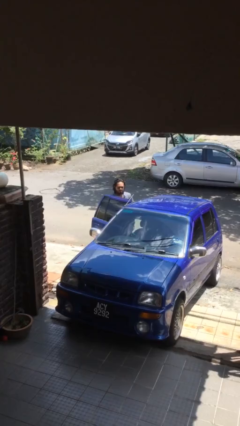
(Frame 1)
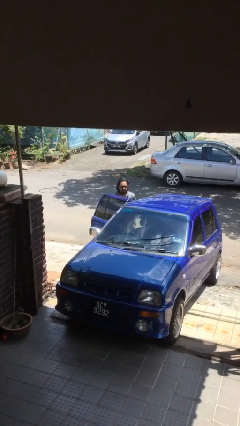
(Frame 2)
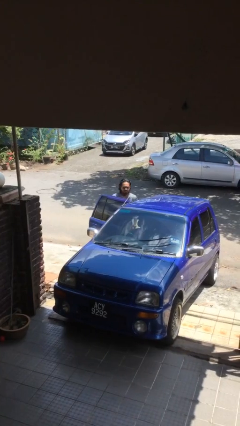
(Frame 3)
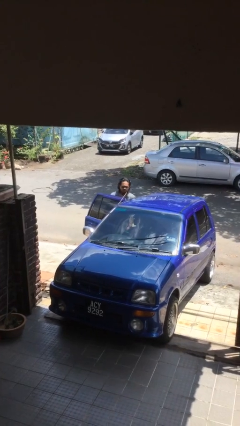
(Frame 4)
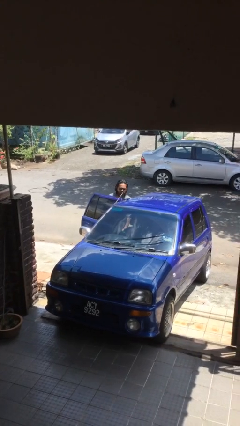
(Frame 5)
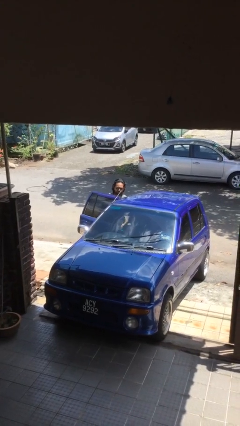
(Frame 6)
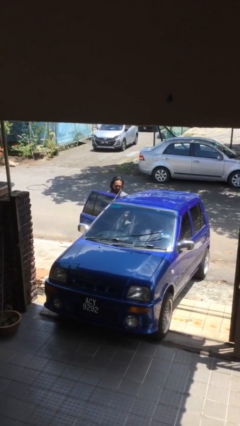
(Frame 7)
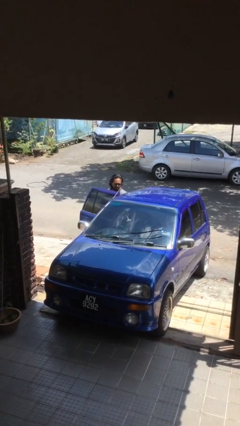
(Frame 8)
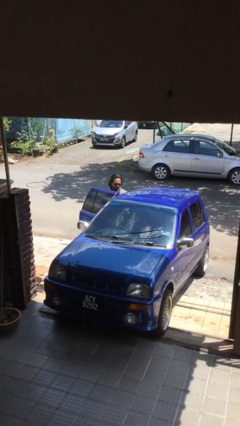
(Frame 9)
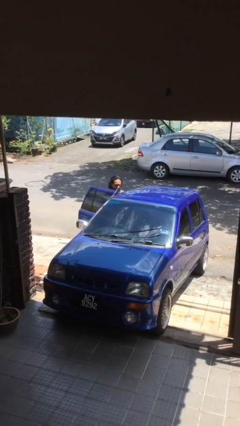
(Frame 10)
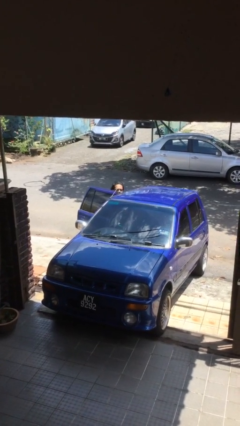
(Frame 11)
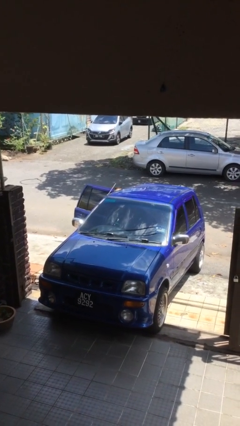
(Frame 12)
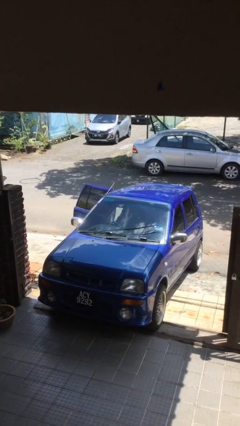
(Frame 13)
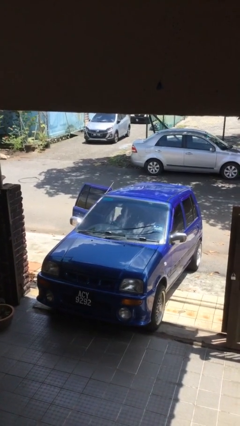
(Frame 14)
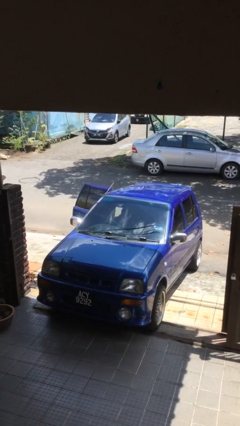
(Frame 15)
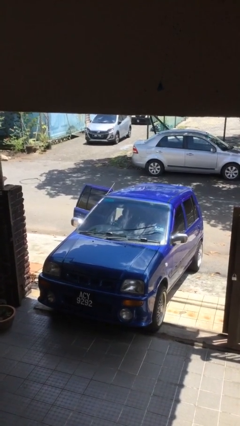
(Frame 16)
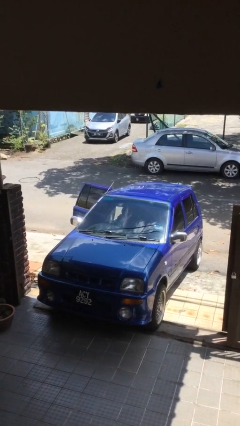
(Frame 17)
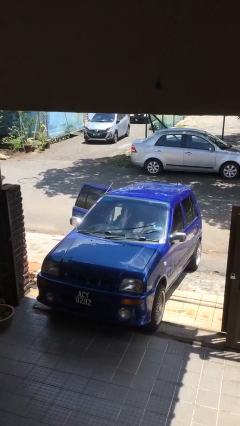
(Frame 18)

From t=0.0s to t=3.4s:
person enters car

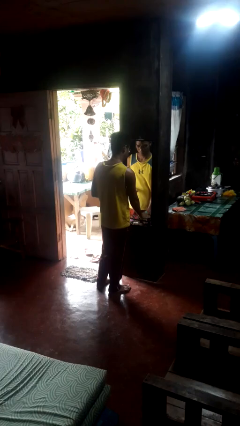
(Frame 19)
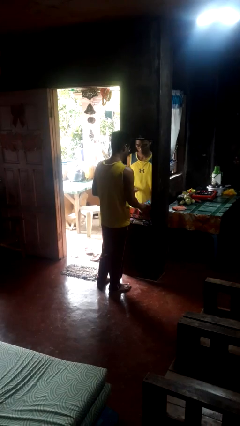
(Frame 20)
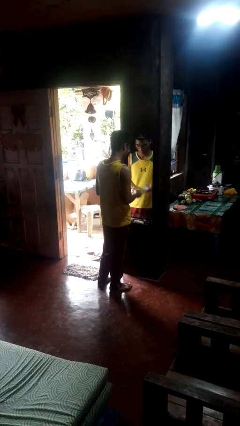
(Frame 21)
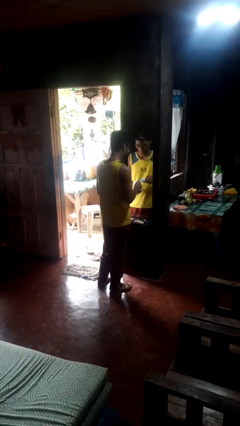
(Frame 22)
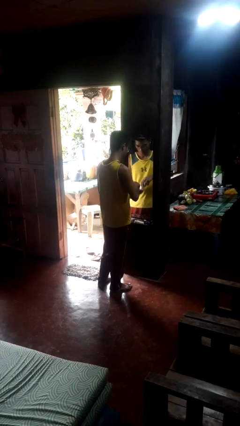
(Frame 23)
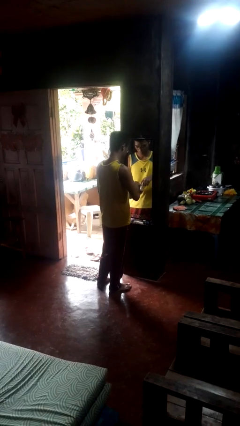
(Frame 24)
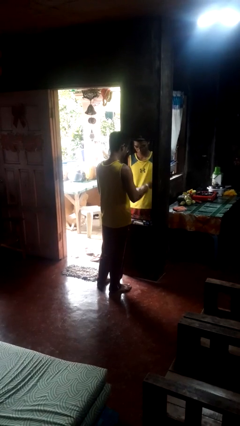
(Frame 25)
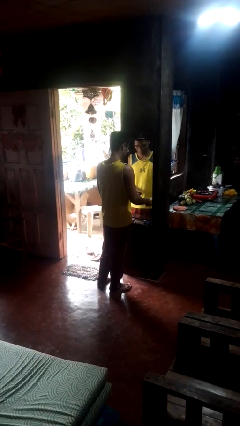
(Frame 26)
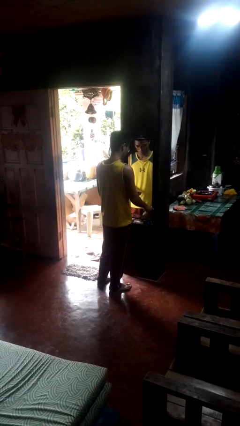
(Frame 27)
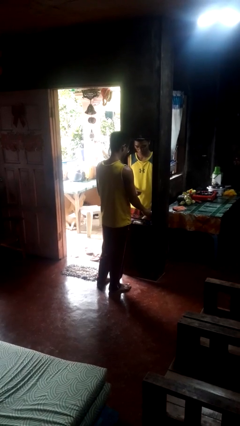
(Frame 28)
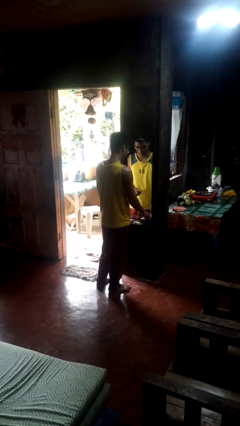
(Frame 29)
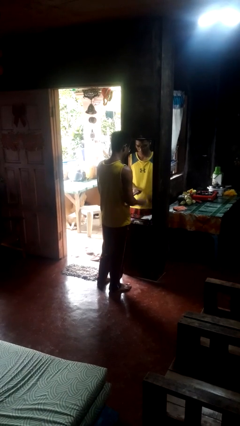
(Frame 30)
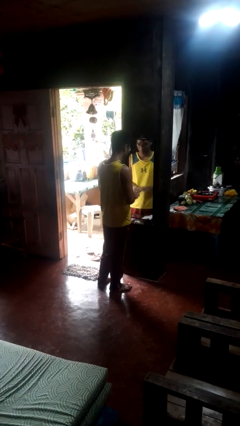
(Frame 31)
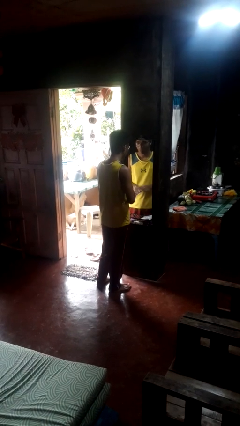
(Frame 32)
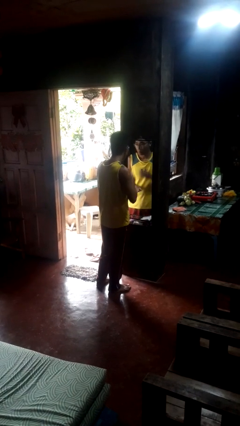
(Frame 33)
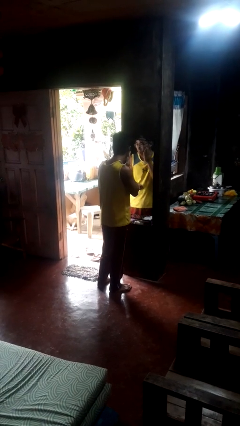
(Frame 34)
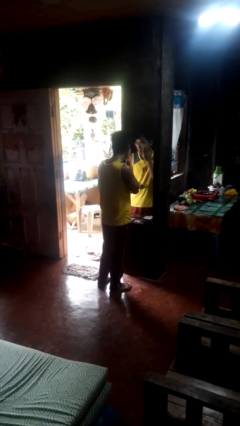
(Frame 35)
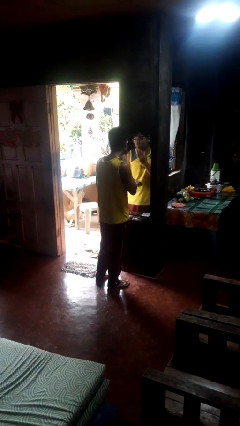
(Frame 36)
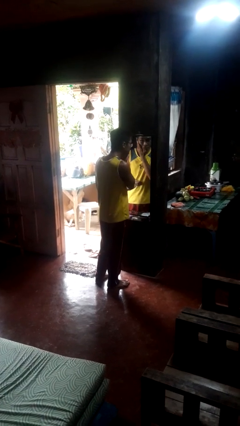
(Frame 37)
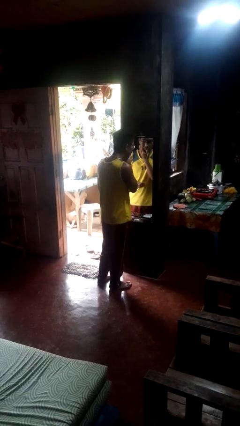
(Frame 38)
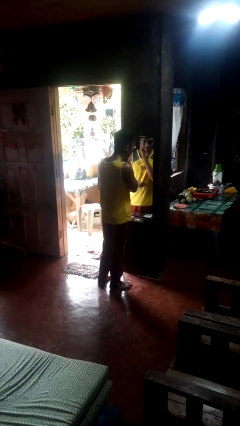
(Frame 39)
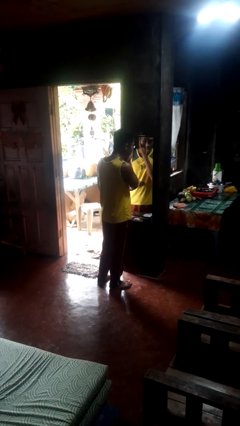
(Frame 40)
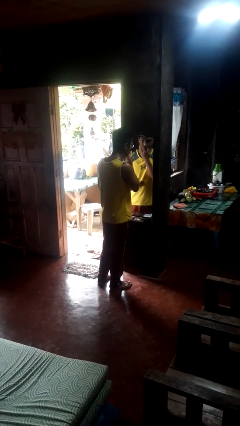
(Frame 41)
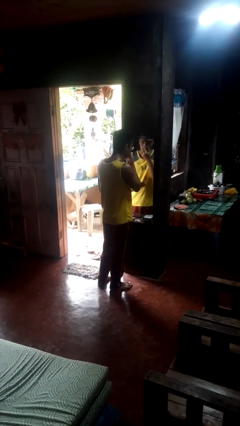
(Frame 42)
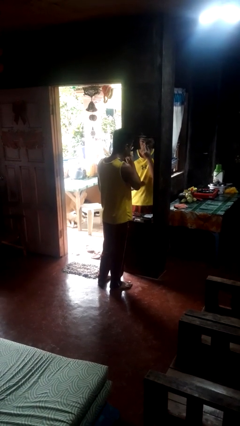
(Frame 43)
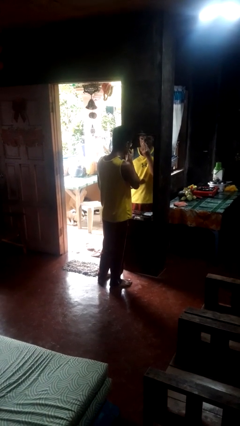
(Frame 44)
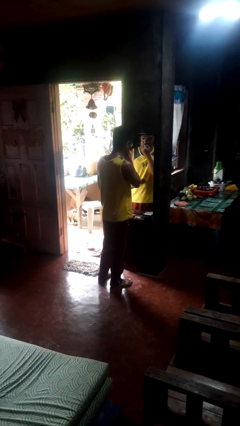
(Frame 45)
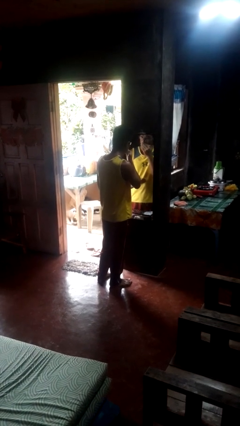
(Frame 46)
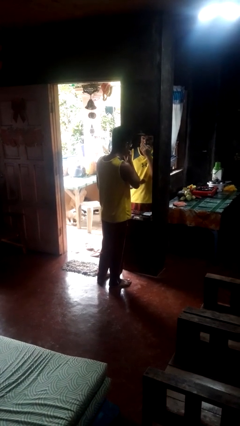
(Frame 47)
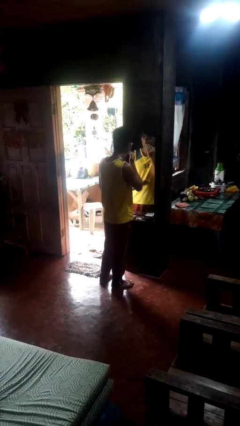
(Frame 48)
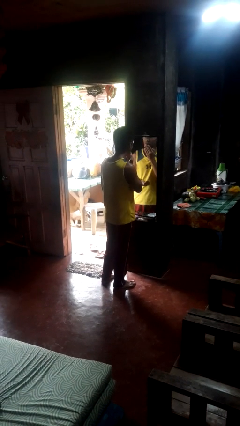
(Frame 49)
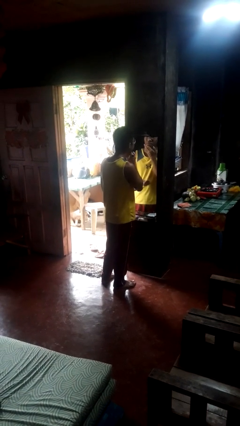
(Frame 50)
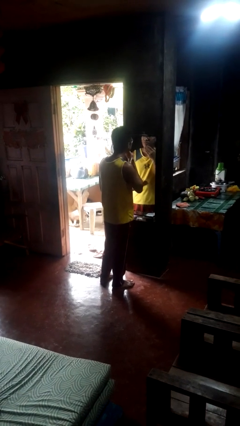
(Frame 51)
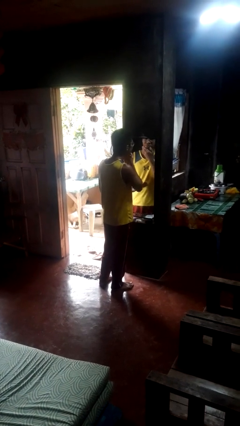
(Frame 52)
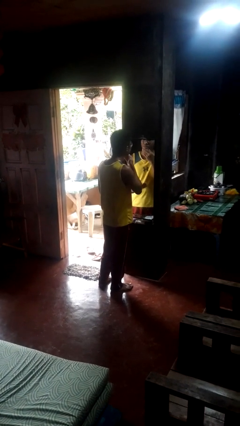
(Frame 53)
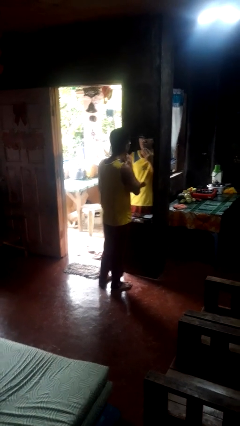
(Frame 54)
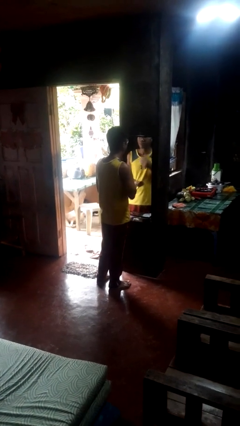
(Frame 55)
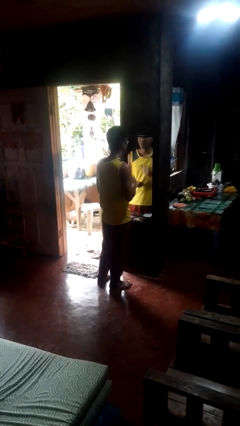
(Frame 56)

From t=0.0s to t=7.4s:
person applies foundation makeup

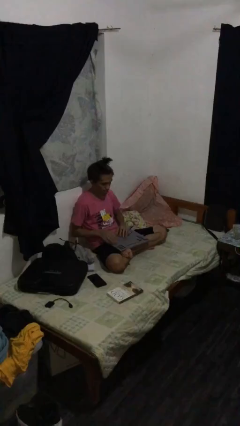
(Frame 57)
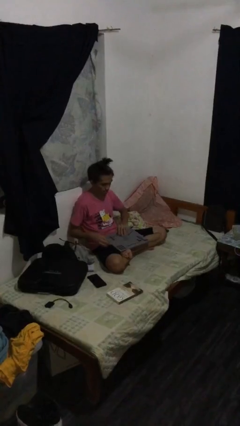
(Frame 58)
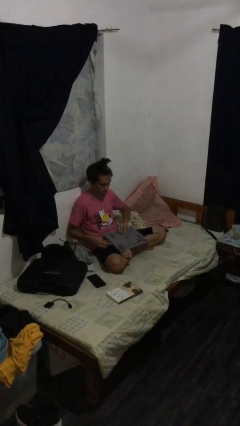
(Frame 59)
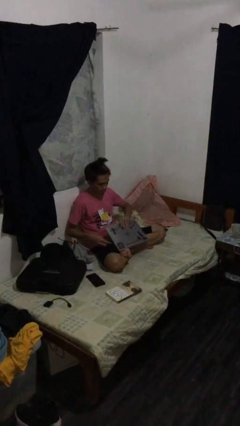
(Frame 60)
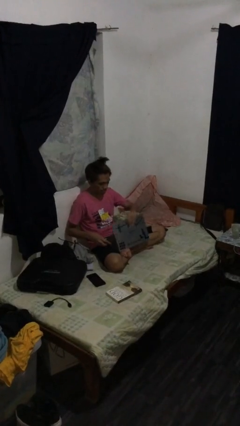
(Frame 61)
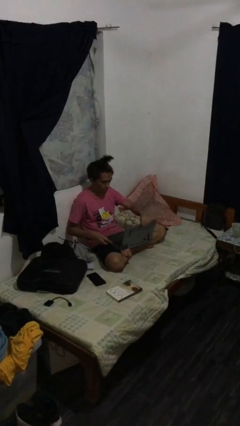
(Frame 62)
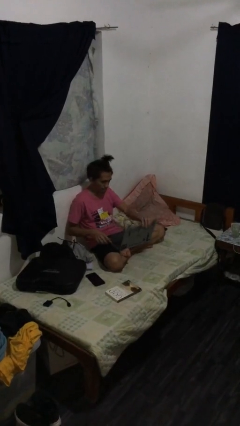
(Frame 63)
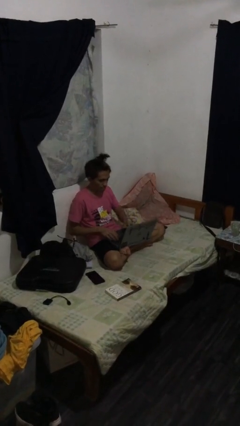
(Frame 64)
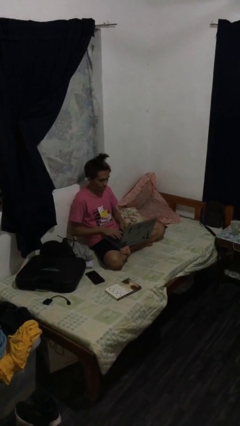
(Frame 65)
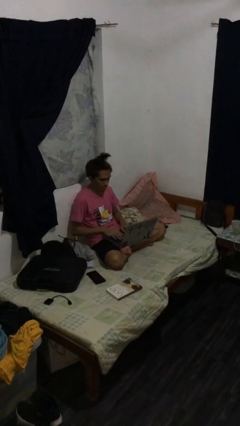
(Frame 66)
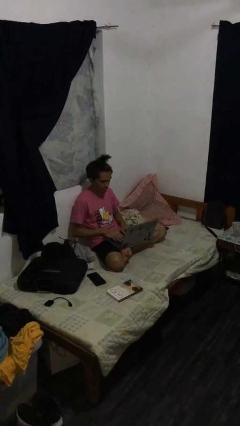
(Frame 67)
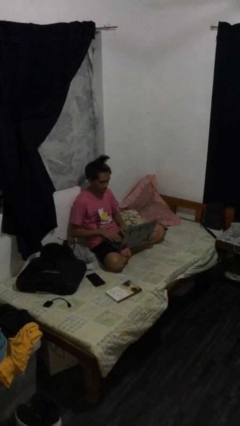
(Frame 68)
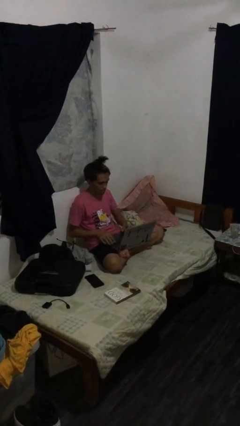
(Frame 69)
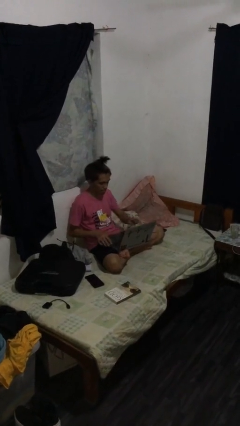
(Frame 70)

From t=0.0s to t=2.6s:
person interacts with laptop

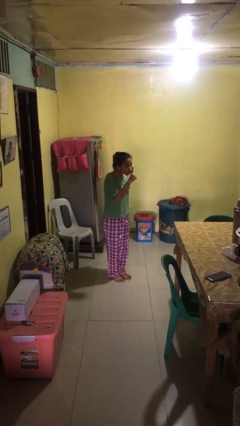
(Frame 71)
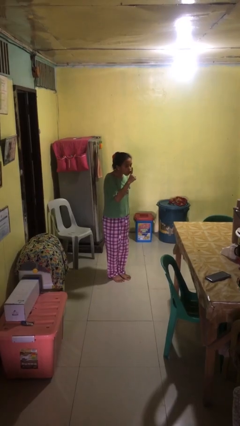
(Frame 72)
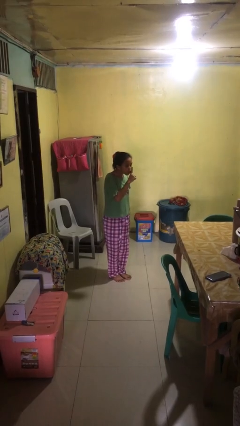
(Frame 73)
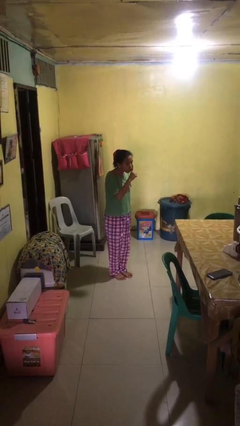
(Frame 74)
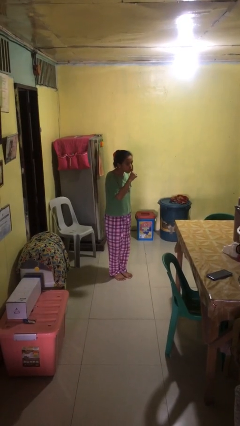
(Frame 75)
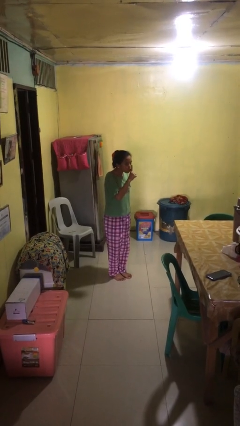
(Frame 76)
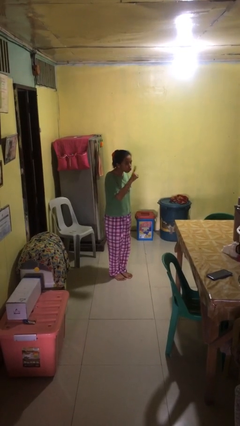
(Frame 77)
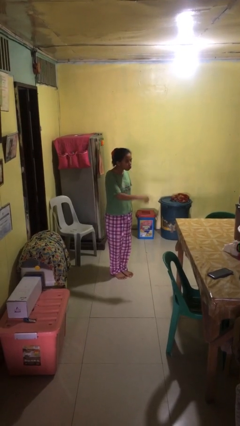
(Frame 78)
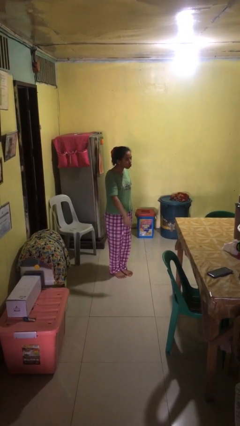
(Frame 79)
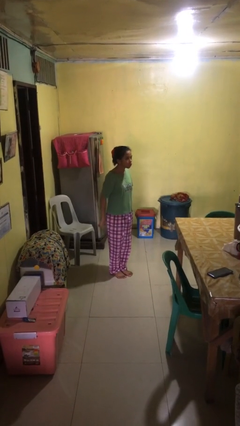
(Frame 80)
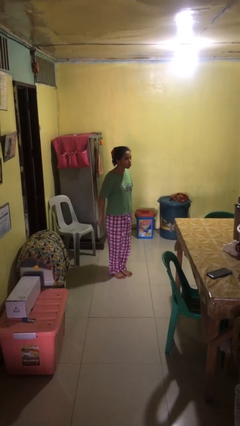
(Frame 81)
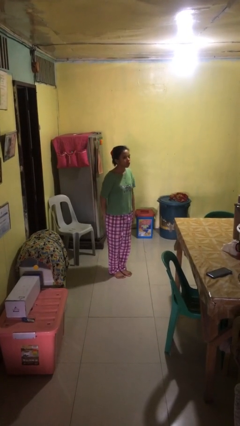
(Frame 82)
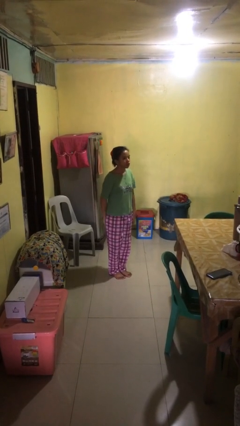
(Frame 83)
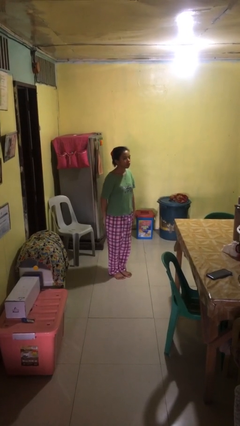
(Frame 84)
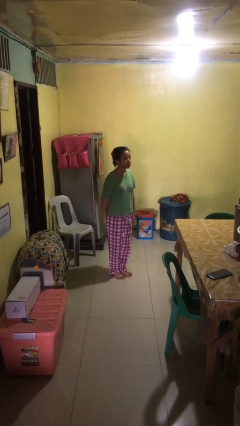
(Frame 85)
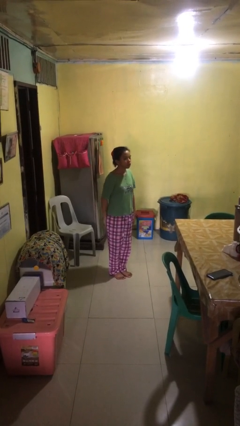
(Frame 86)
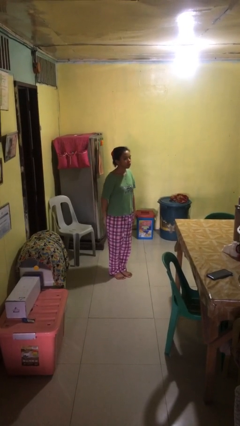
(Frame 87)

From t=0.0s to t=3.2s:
person gestures be quiet

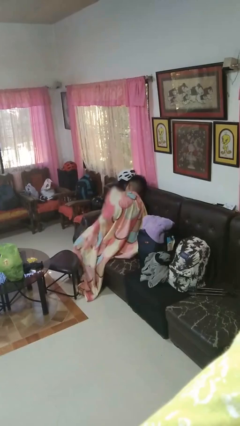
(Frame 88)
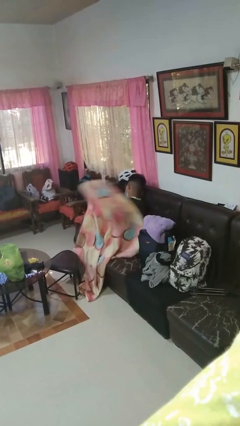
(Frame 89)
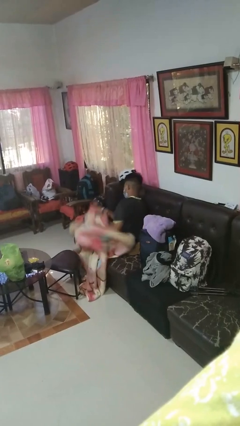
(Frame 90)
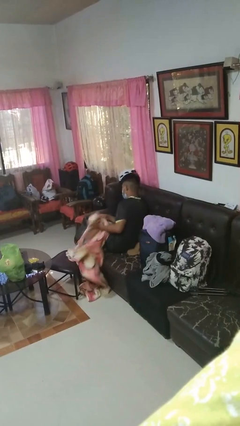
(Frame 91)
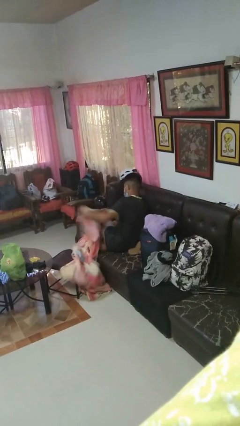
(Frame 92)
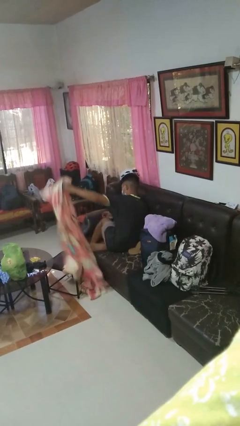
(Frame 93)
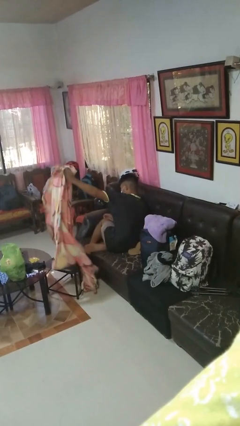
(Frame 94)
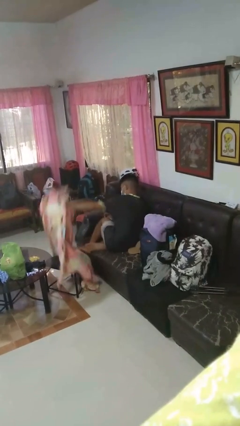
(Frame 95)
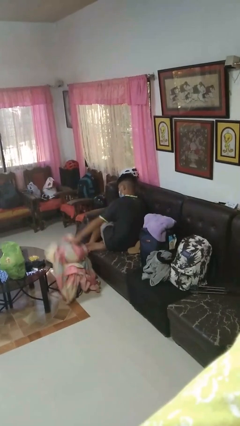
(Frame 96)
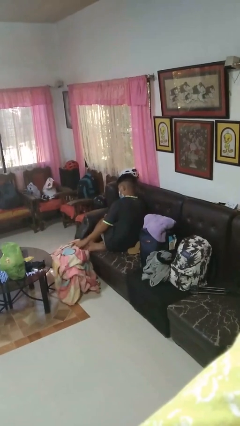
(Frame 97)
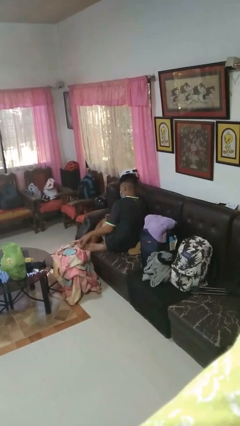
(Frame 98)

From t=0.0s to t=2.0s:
person uncovers with blanket
